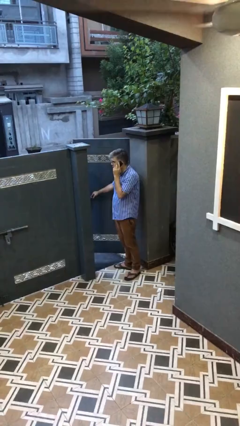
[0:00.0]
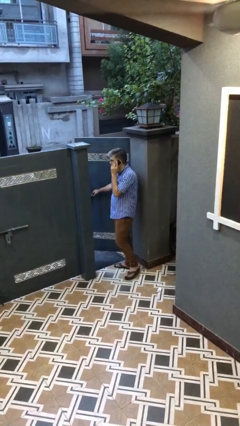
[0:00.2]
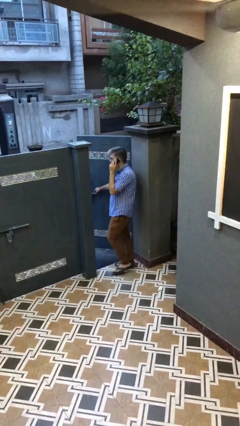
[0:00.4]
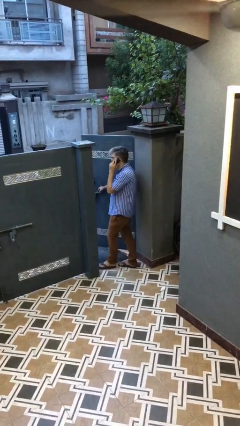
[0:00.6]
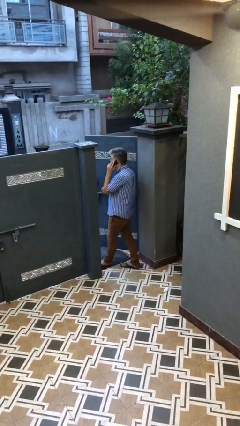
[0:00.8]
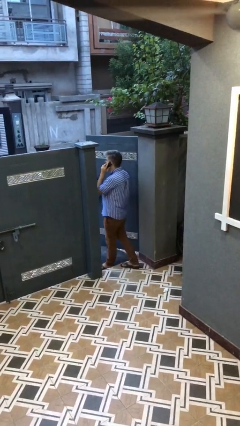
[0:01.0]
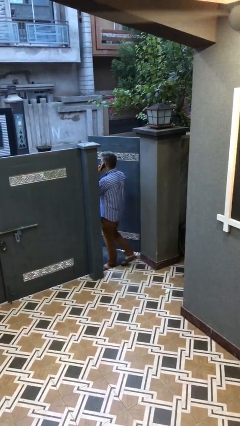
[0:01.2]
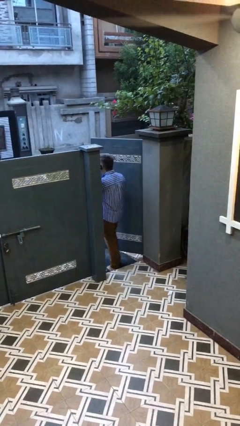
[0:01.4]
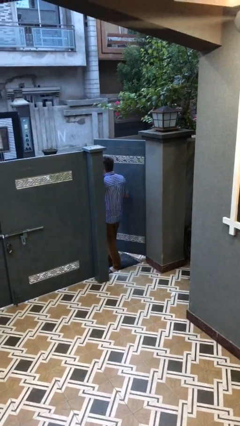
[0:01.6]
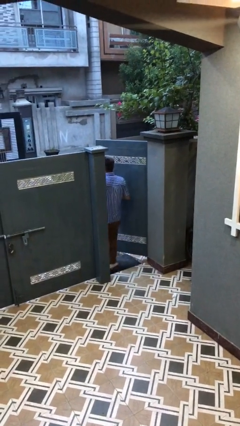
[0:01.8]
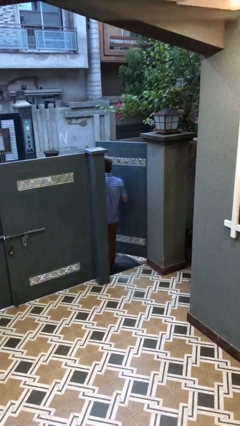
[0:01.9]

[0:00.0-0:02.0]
person exits scene through structure

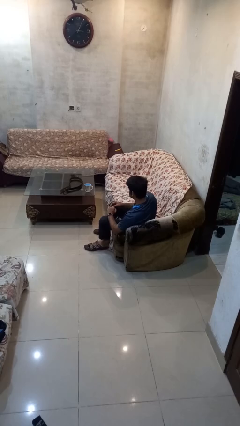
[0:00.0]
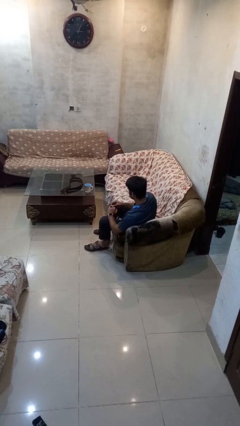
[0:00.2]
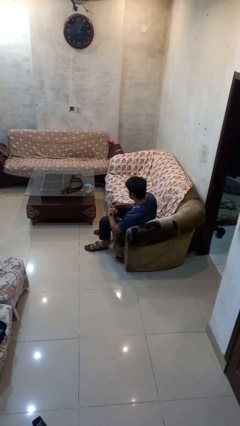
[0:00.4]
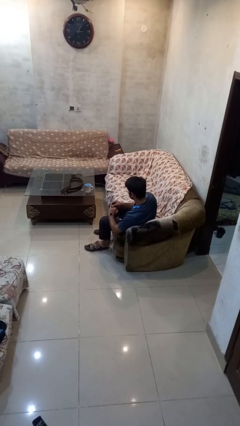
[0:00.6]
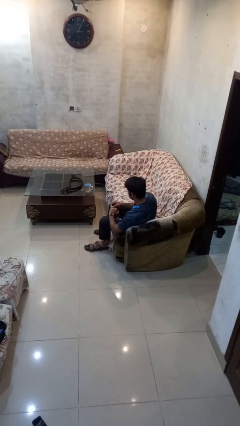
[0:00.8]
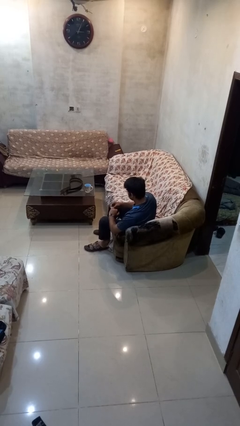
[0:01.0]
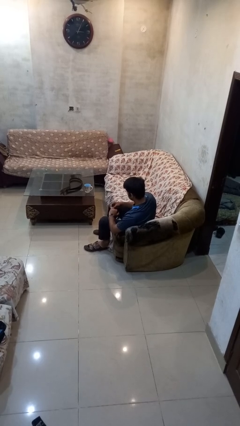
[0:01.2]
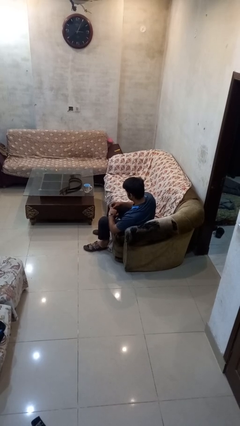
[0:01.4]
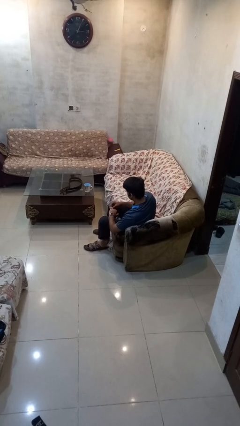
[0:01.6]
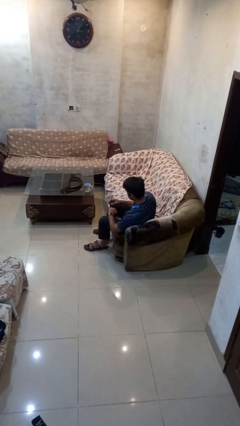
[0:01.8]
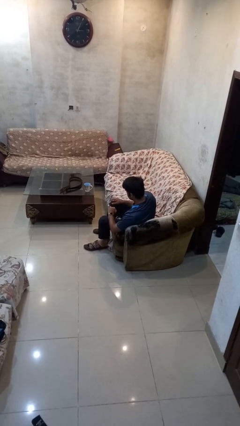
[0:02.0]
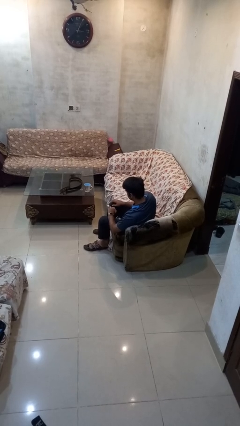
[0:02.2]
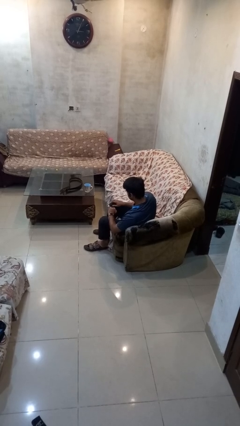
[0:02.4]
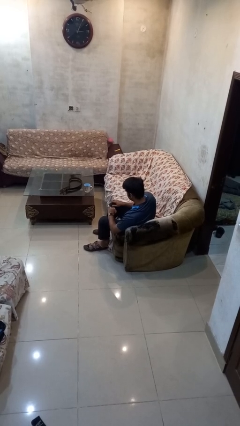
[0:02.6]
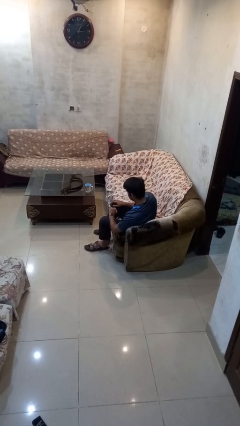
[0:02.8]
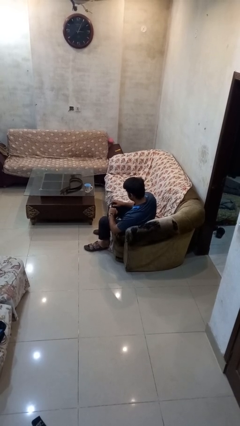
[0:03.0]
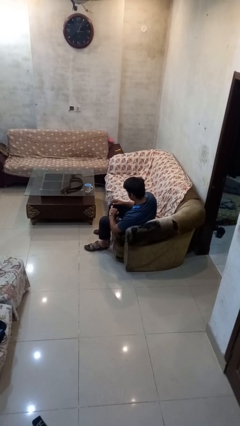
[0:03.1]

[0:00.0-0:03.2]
person puts on ring

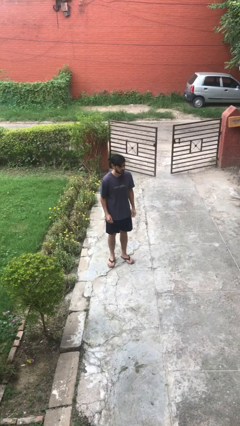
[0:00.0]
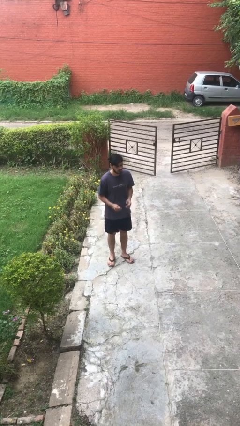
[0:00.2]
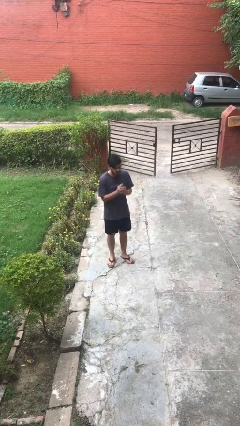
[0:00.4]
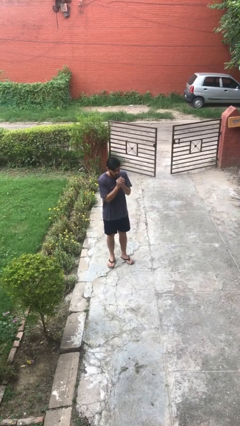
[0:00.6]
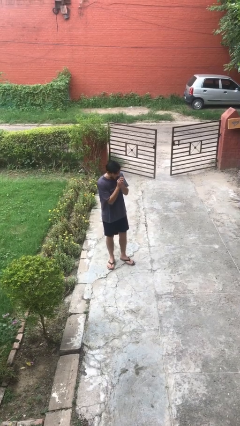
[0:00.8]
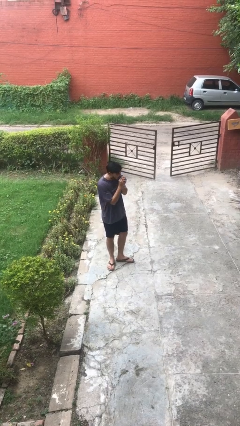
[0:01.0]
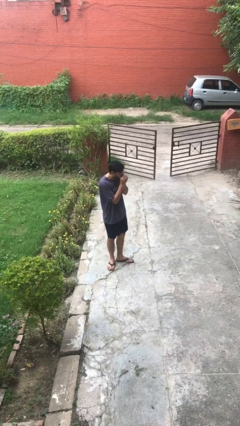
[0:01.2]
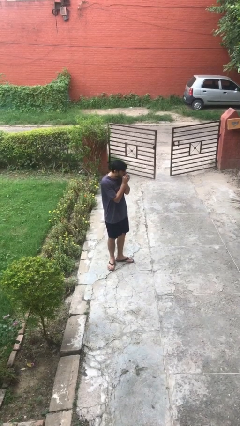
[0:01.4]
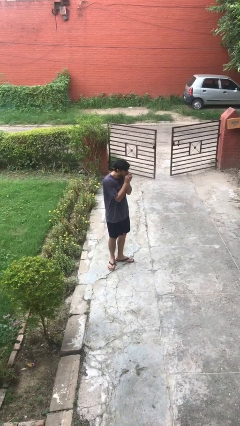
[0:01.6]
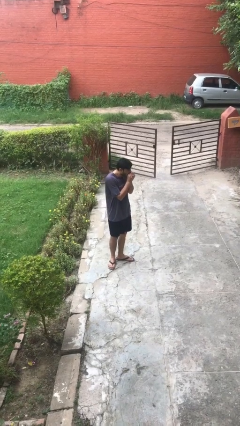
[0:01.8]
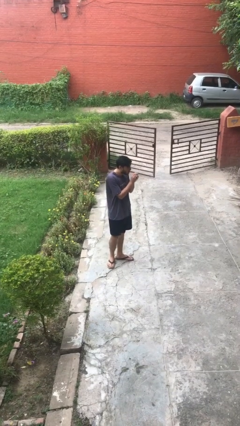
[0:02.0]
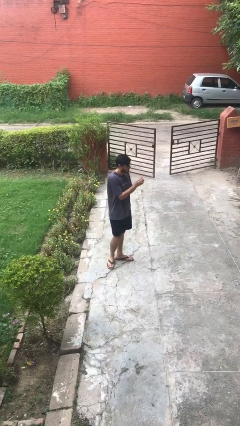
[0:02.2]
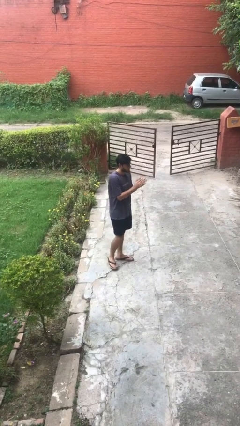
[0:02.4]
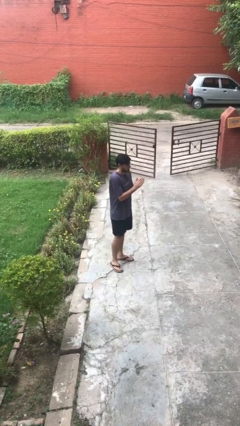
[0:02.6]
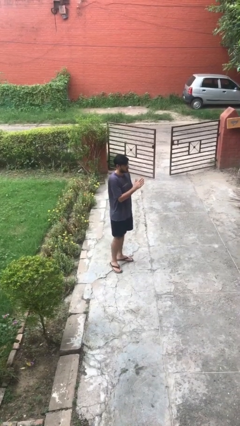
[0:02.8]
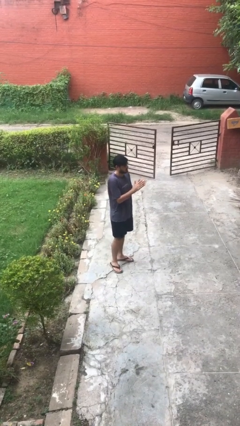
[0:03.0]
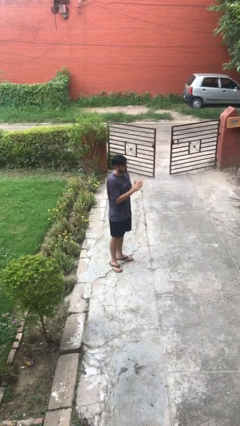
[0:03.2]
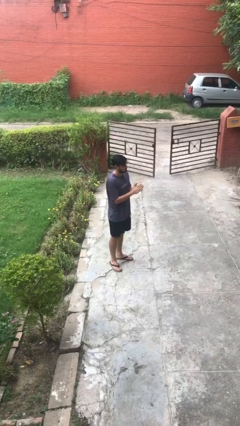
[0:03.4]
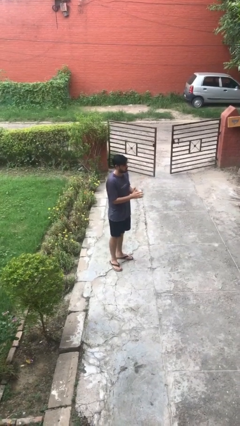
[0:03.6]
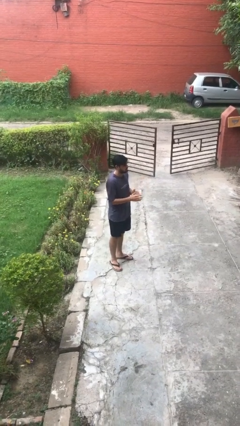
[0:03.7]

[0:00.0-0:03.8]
person blows into hands

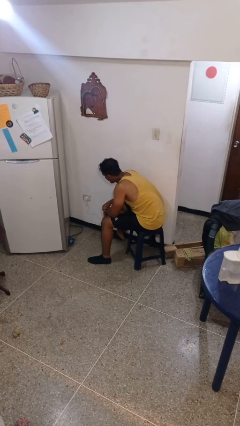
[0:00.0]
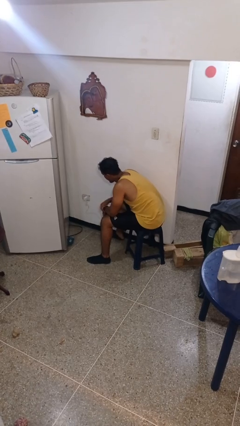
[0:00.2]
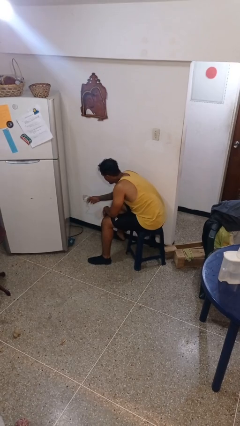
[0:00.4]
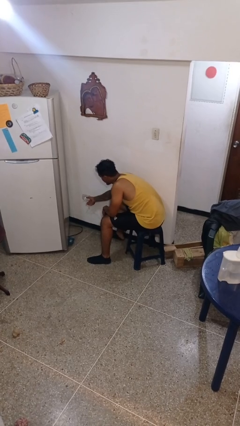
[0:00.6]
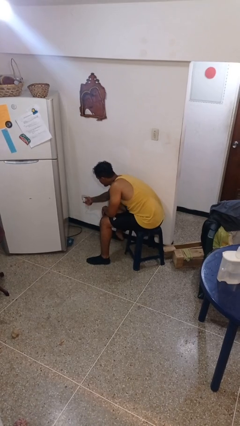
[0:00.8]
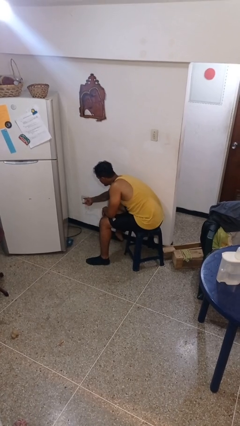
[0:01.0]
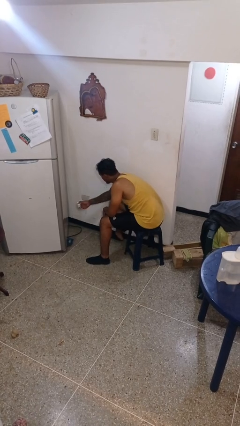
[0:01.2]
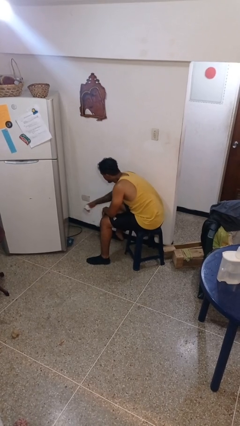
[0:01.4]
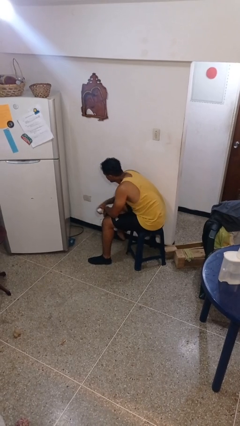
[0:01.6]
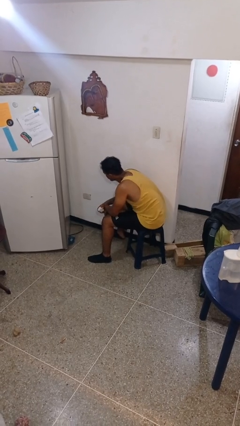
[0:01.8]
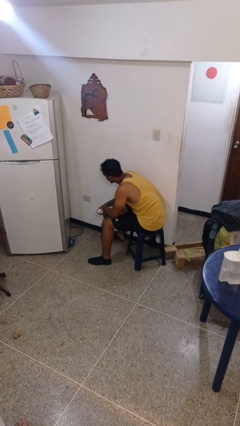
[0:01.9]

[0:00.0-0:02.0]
person unplugs from electrical socket

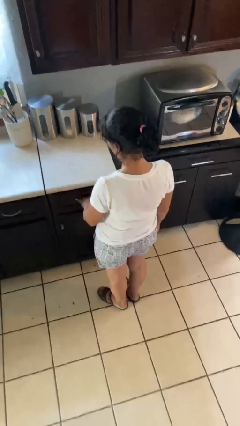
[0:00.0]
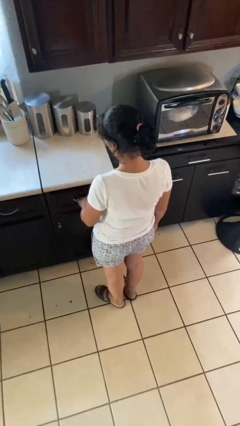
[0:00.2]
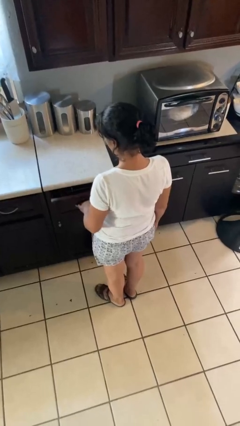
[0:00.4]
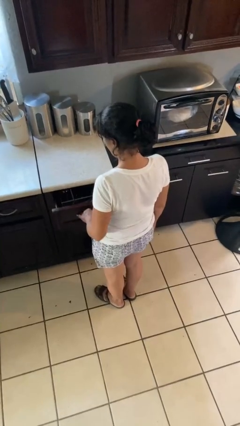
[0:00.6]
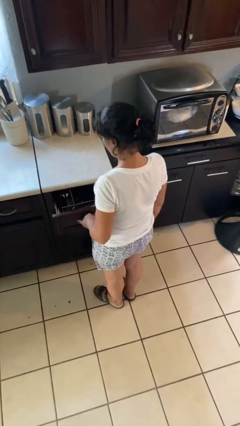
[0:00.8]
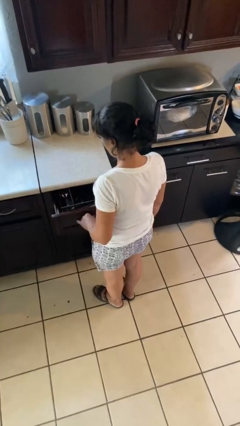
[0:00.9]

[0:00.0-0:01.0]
person opens kitchen drawer

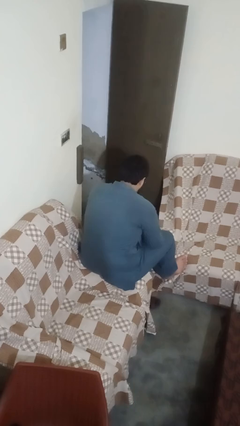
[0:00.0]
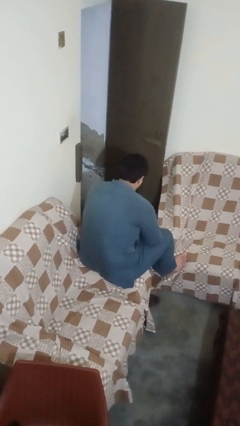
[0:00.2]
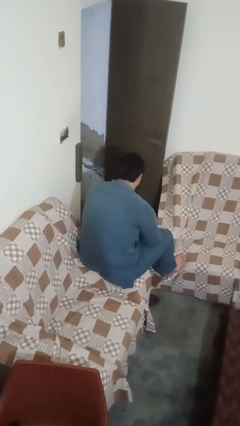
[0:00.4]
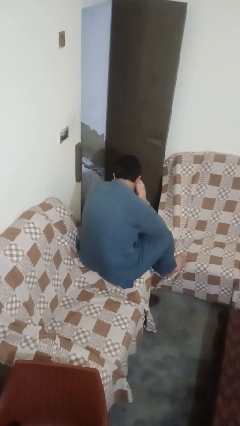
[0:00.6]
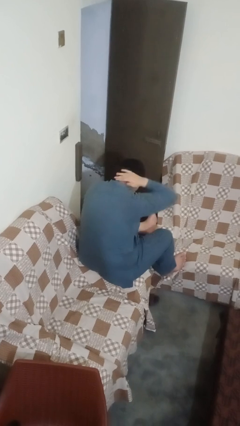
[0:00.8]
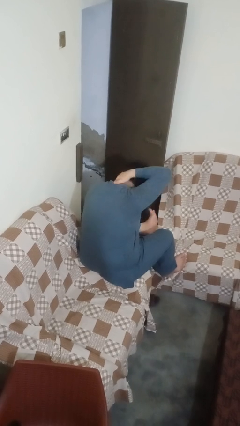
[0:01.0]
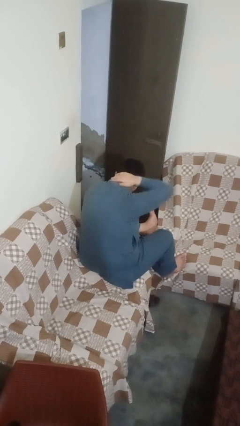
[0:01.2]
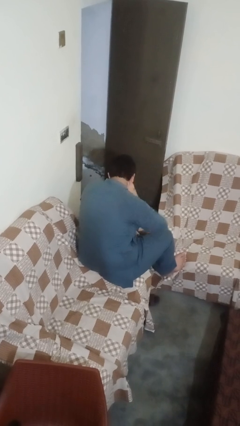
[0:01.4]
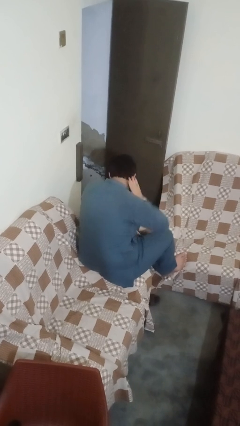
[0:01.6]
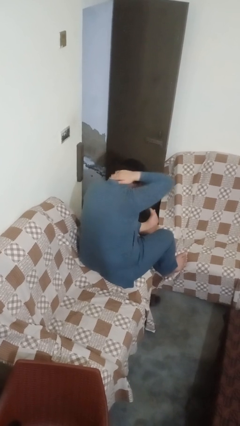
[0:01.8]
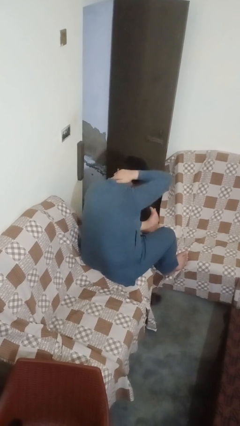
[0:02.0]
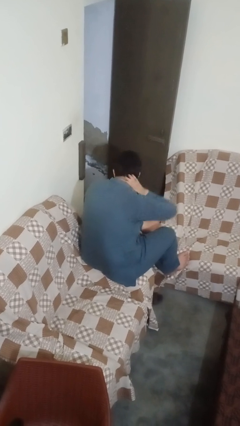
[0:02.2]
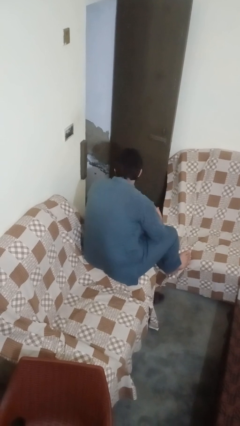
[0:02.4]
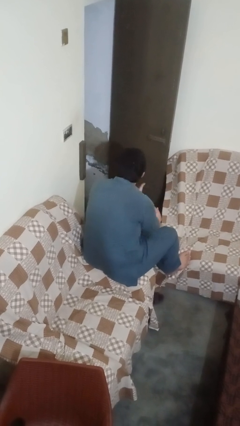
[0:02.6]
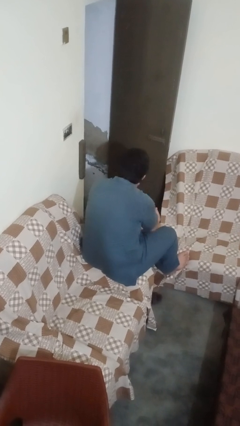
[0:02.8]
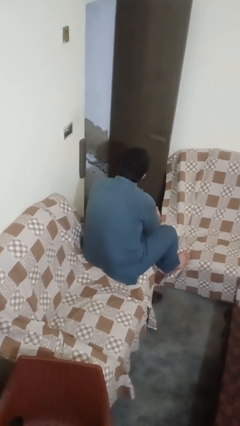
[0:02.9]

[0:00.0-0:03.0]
person rubs neck

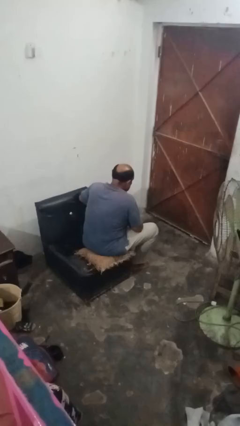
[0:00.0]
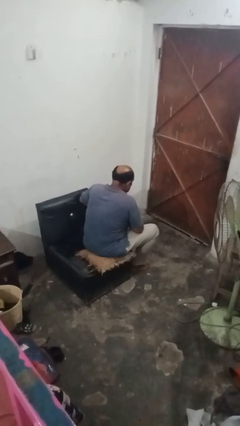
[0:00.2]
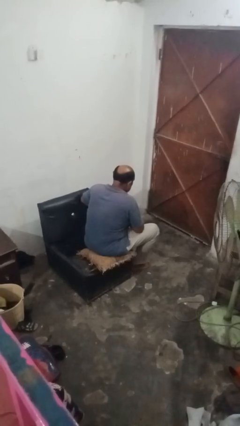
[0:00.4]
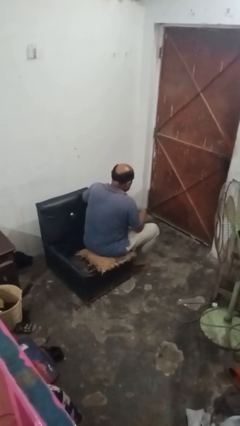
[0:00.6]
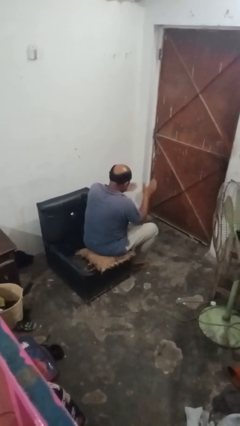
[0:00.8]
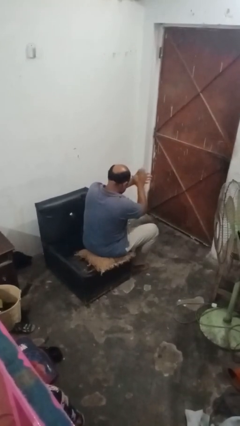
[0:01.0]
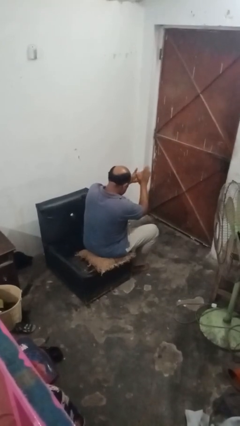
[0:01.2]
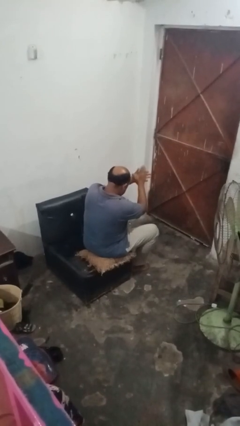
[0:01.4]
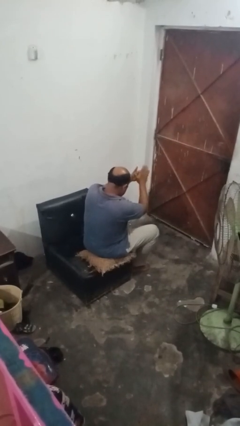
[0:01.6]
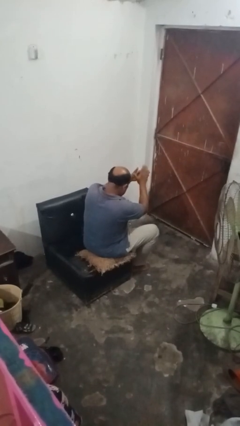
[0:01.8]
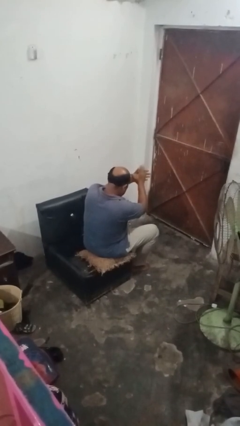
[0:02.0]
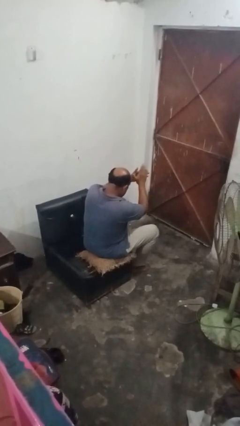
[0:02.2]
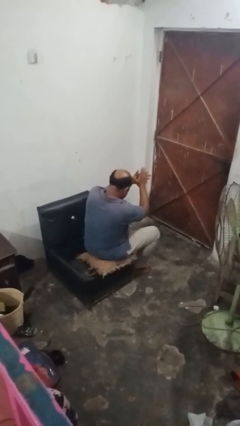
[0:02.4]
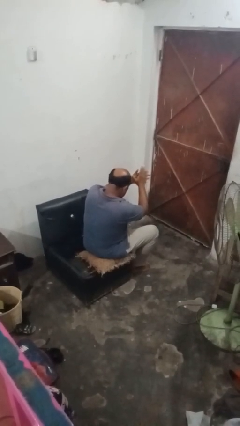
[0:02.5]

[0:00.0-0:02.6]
person claps hands
